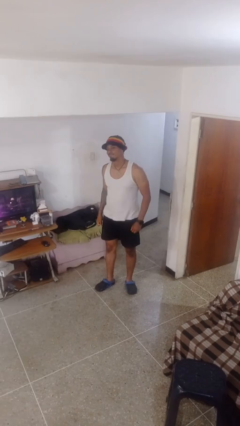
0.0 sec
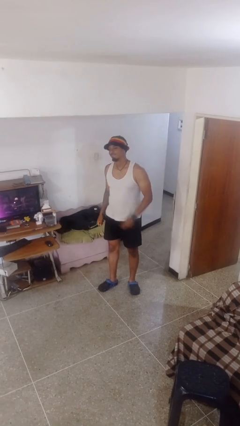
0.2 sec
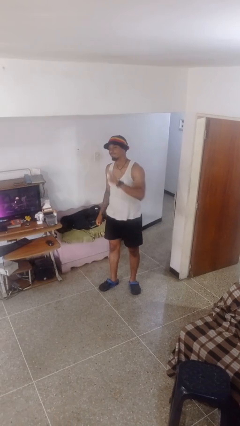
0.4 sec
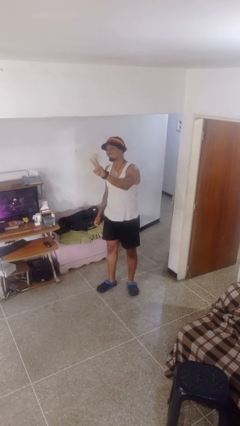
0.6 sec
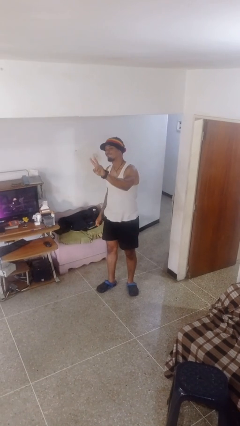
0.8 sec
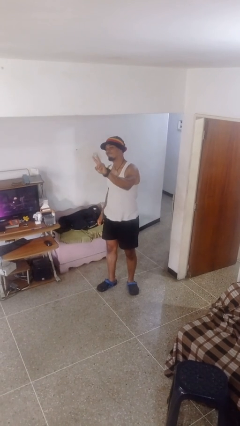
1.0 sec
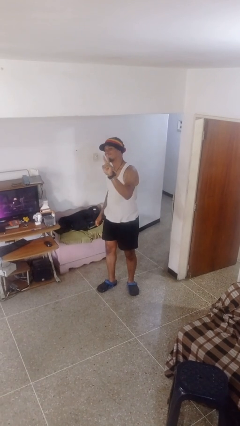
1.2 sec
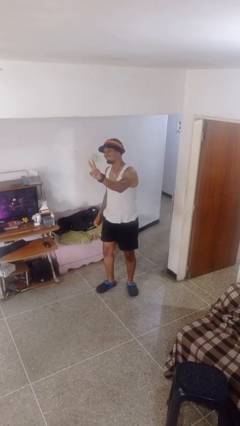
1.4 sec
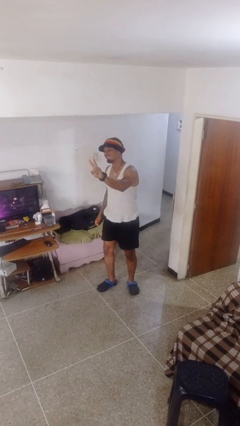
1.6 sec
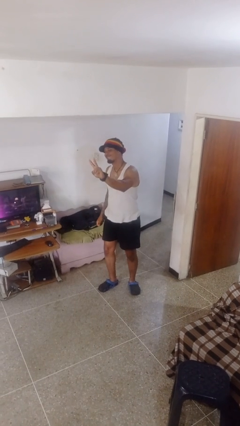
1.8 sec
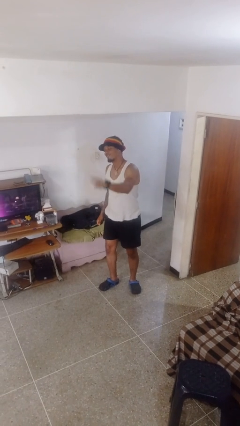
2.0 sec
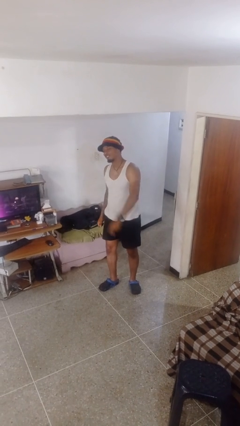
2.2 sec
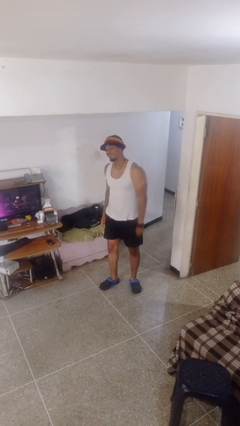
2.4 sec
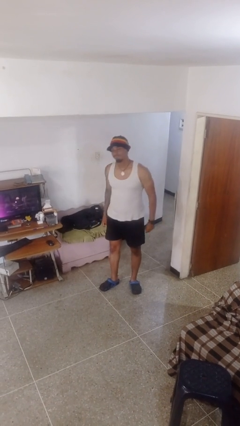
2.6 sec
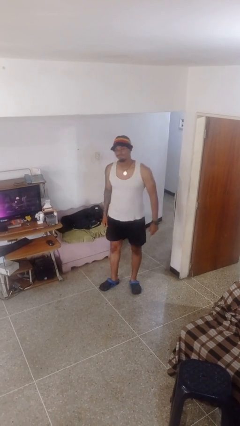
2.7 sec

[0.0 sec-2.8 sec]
person gestures peace

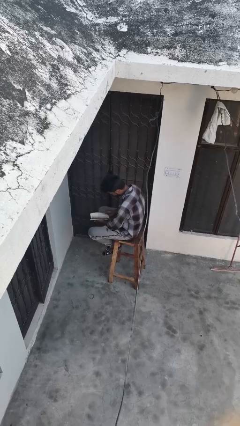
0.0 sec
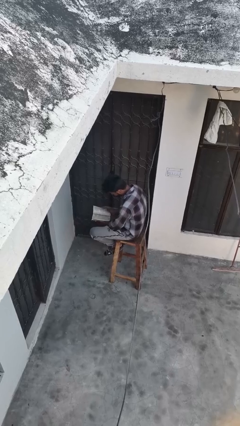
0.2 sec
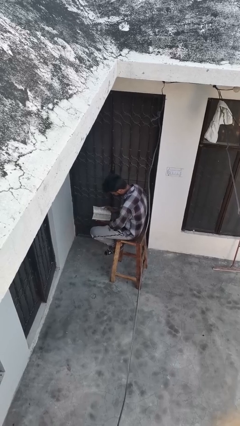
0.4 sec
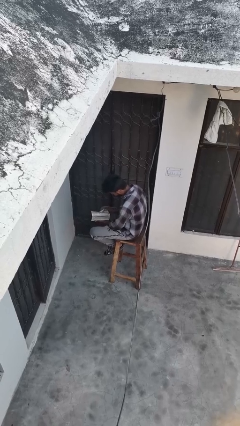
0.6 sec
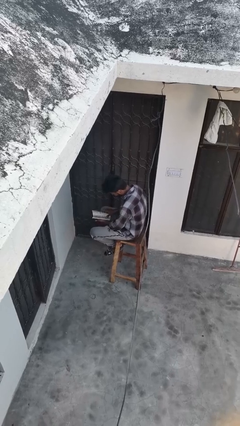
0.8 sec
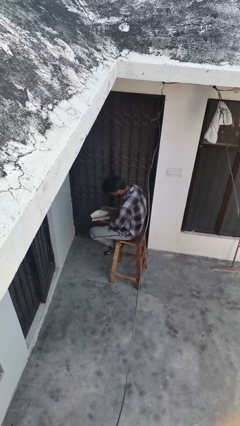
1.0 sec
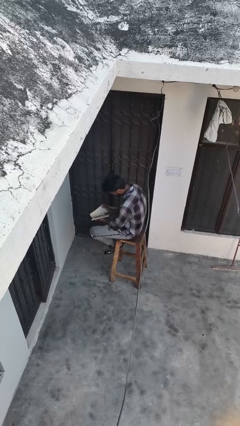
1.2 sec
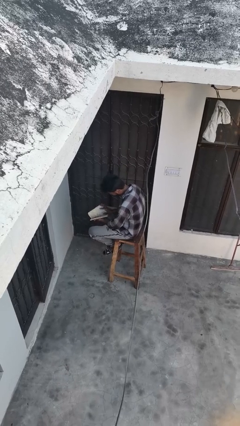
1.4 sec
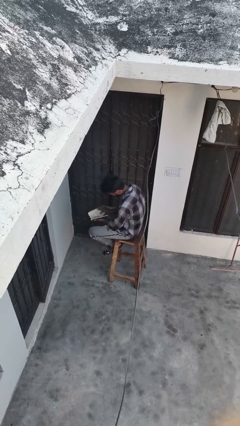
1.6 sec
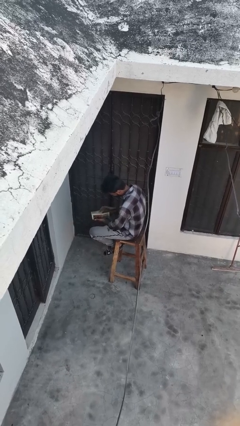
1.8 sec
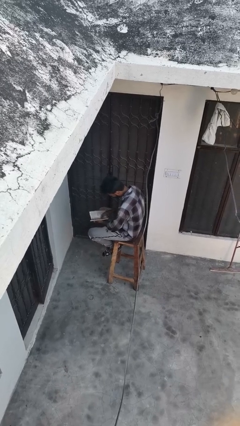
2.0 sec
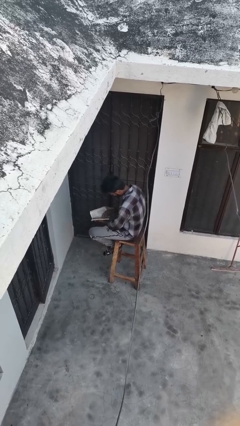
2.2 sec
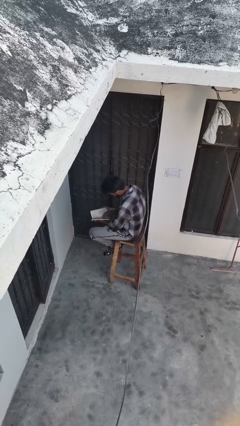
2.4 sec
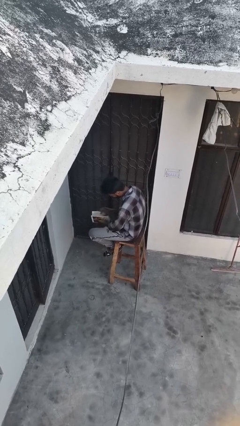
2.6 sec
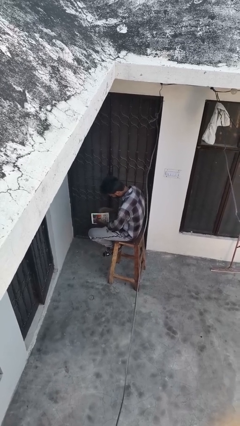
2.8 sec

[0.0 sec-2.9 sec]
person reads book

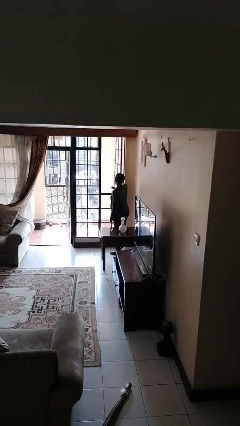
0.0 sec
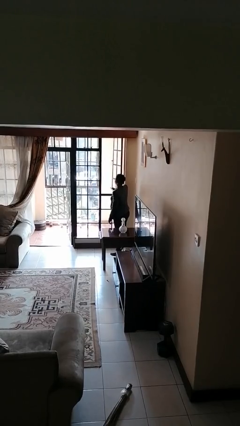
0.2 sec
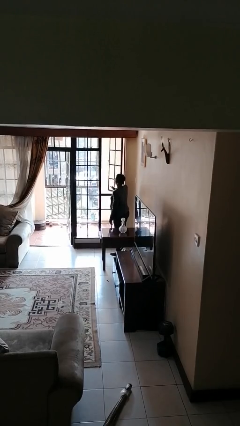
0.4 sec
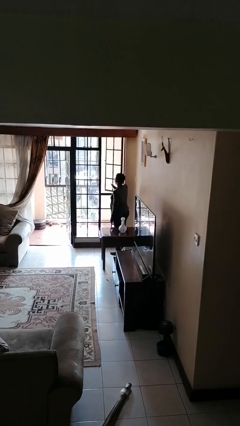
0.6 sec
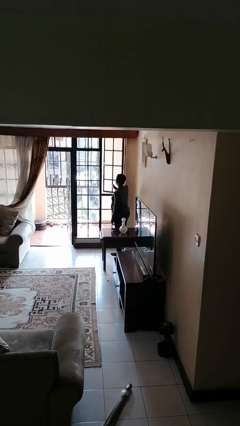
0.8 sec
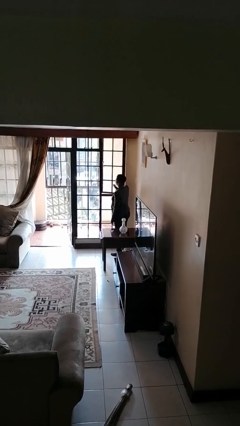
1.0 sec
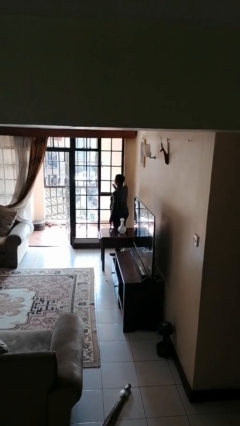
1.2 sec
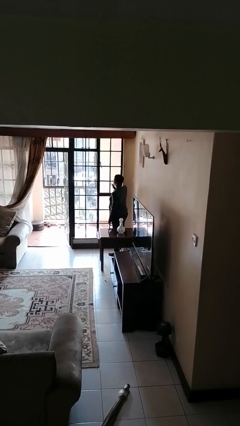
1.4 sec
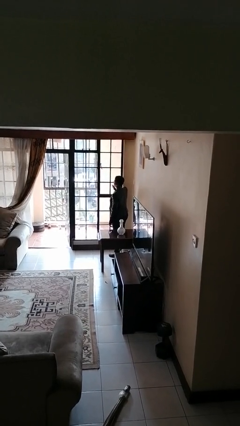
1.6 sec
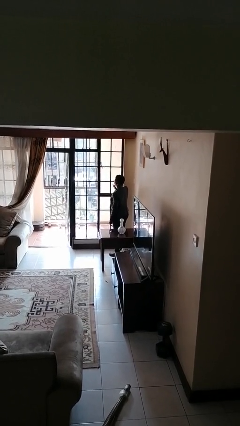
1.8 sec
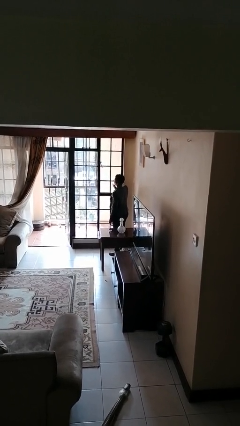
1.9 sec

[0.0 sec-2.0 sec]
person closes home window

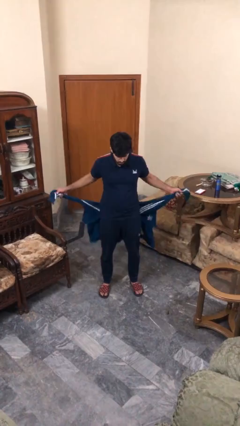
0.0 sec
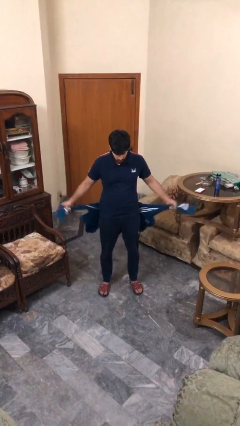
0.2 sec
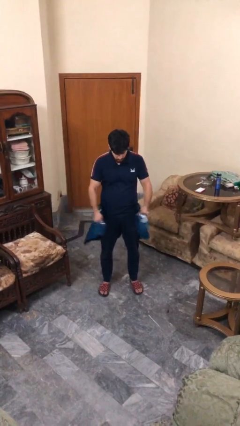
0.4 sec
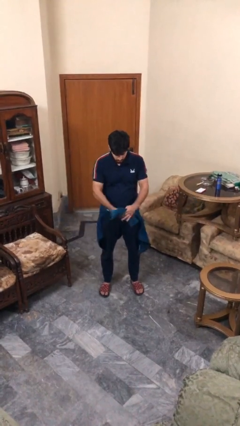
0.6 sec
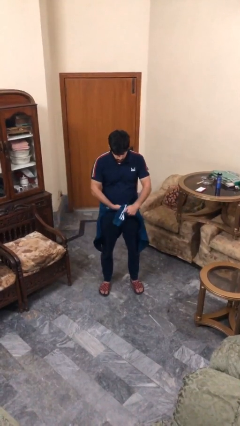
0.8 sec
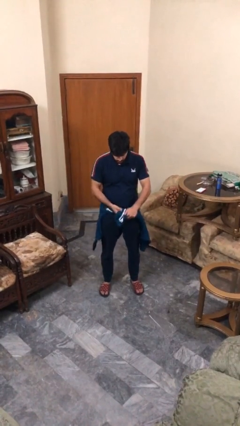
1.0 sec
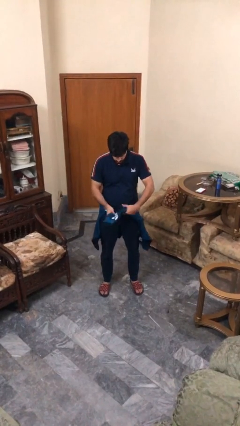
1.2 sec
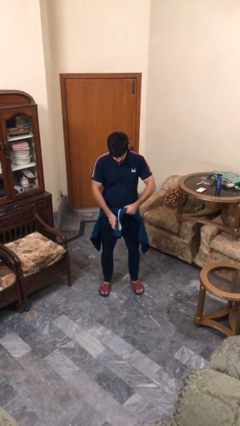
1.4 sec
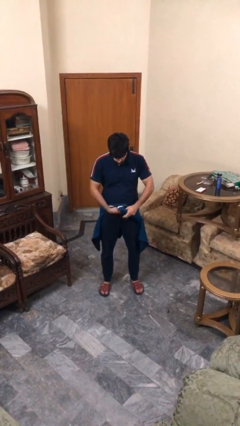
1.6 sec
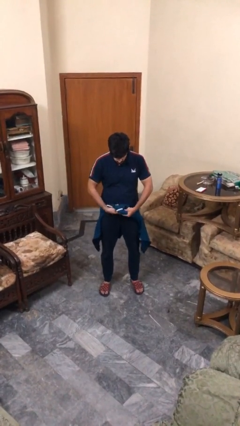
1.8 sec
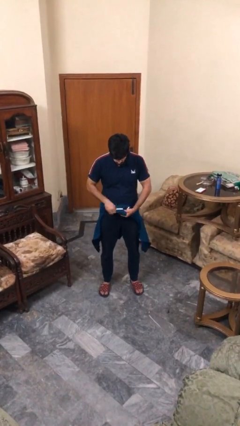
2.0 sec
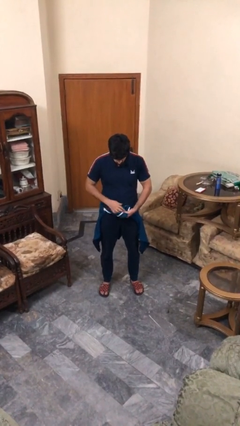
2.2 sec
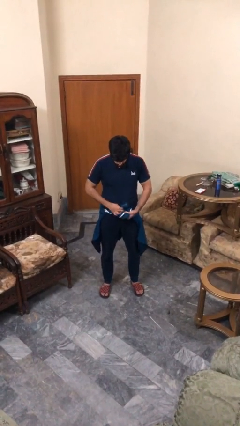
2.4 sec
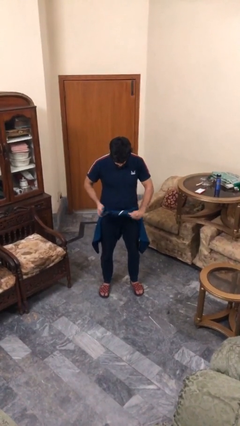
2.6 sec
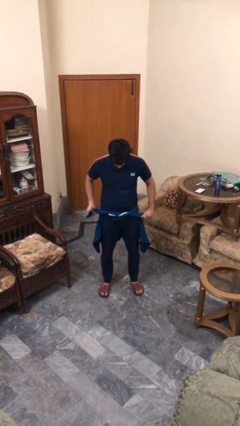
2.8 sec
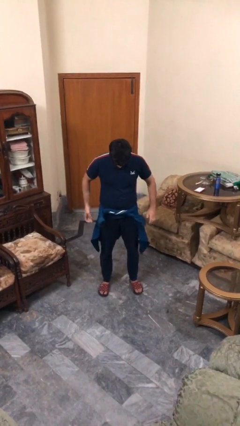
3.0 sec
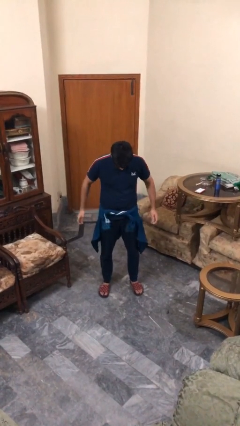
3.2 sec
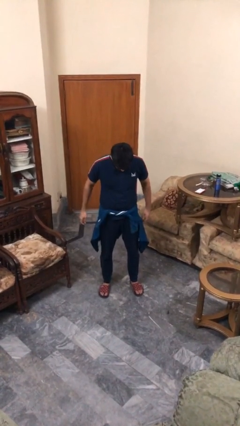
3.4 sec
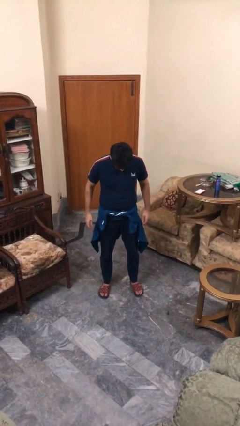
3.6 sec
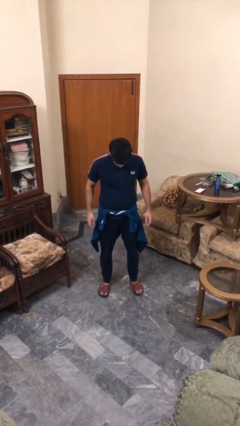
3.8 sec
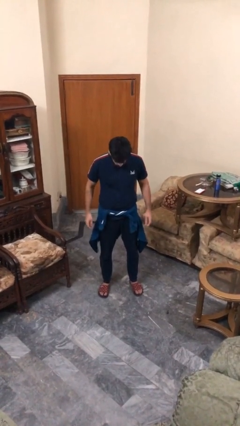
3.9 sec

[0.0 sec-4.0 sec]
person ties jacket around waist

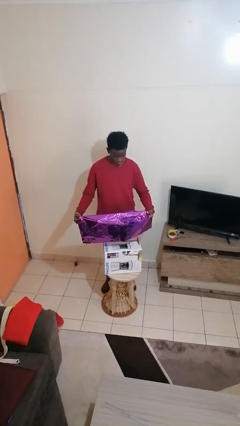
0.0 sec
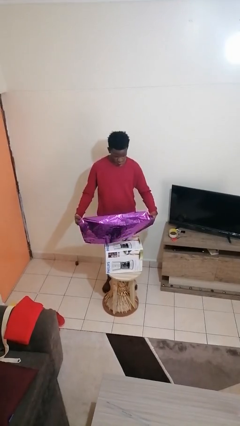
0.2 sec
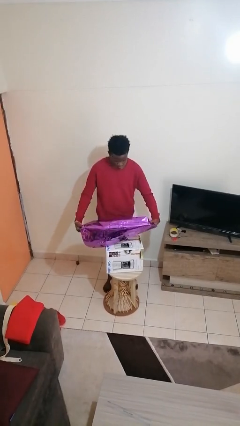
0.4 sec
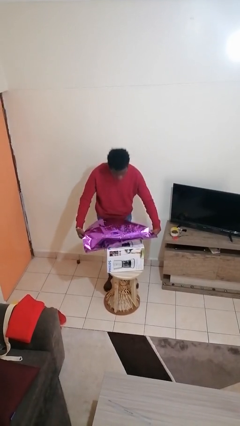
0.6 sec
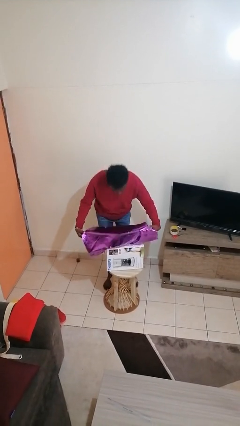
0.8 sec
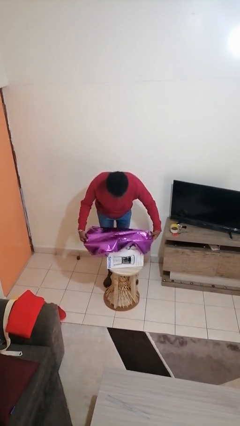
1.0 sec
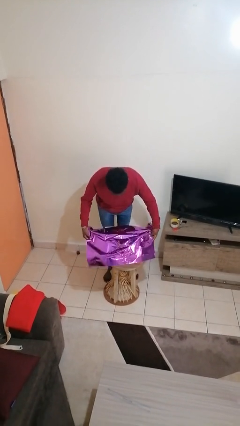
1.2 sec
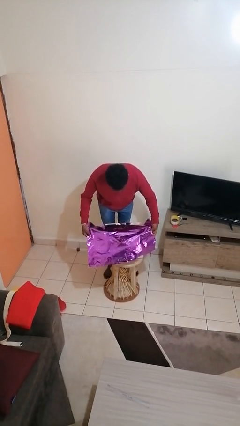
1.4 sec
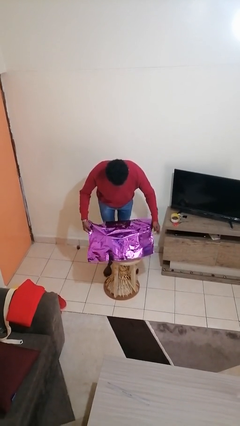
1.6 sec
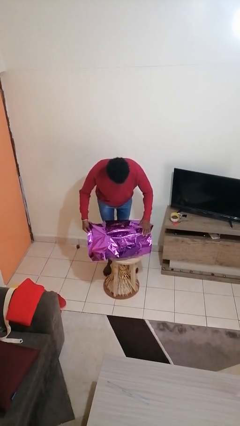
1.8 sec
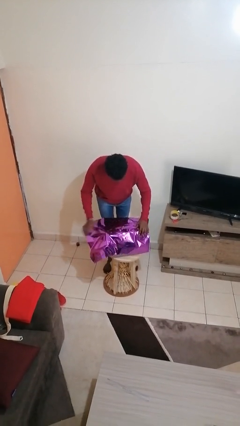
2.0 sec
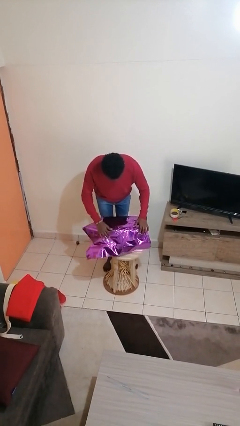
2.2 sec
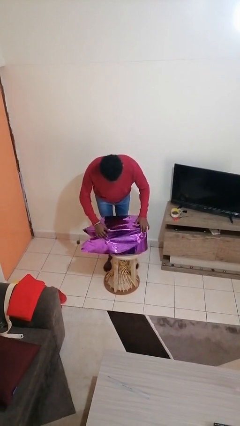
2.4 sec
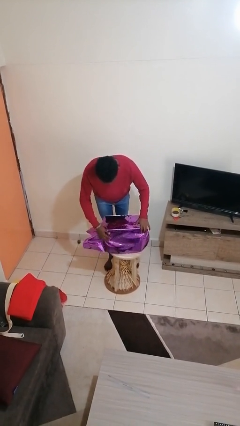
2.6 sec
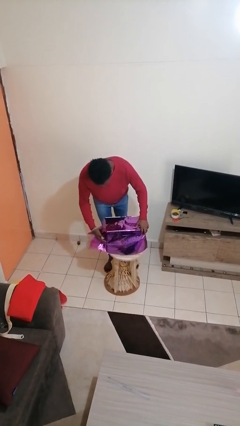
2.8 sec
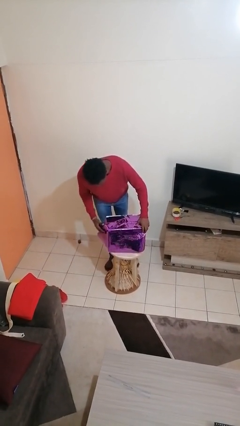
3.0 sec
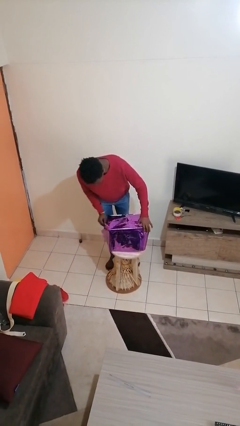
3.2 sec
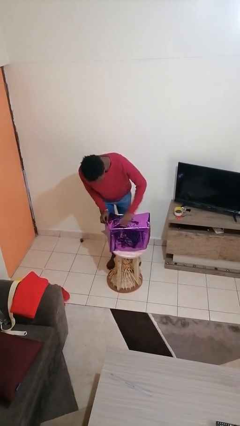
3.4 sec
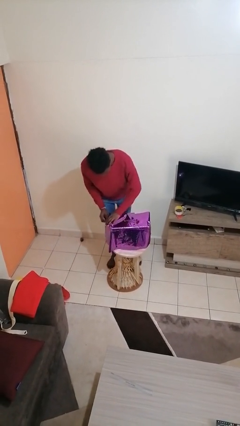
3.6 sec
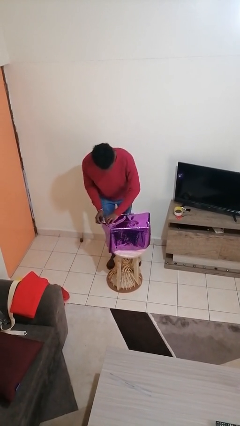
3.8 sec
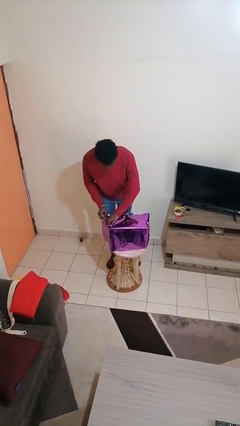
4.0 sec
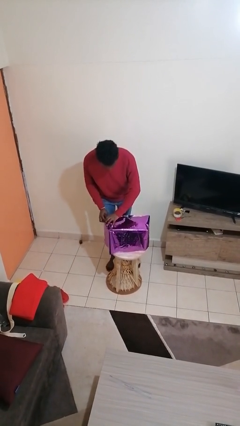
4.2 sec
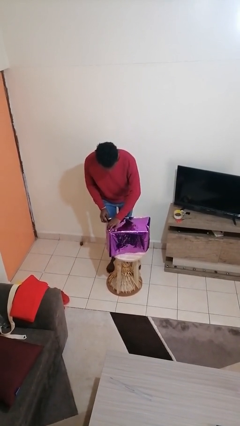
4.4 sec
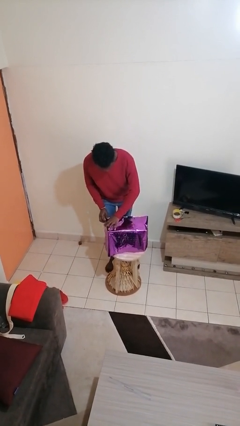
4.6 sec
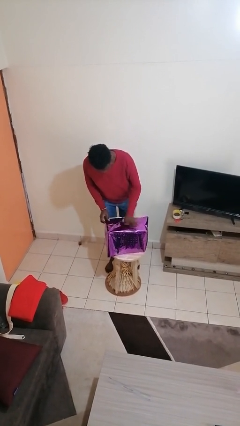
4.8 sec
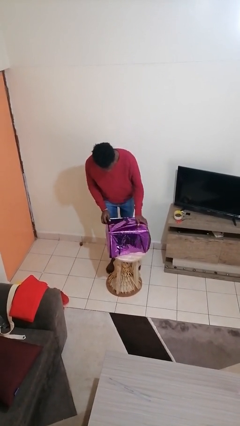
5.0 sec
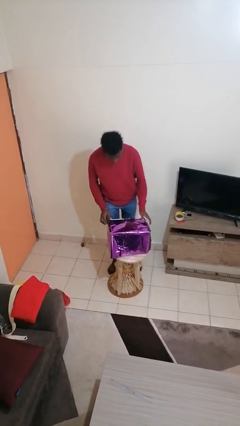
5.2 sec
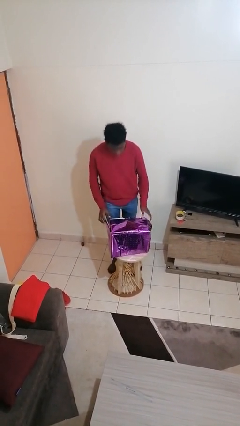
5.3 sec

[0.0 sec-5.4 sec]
person wraps box

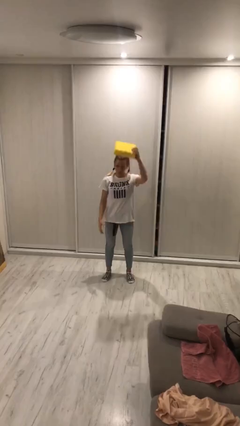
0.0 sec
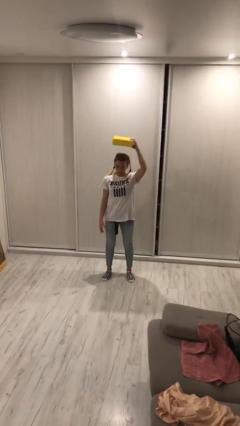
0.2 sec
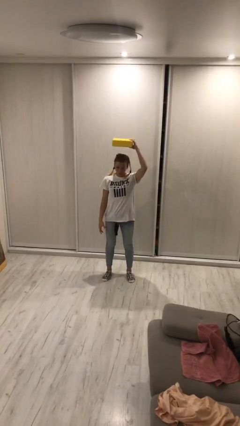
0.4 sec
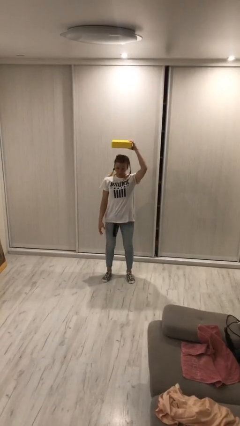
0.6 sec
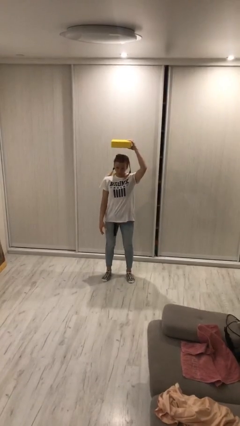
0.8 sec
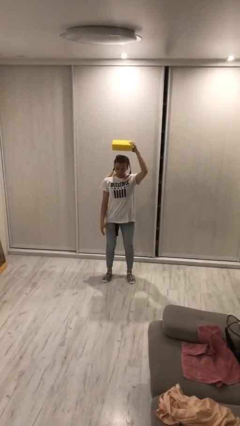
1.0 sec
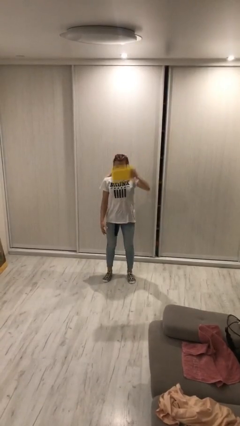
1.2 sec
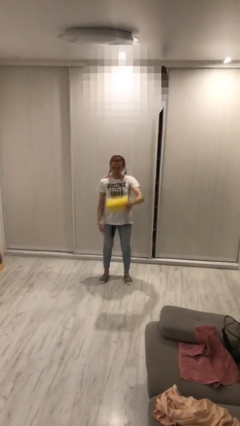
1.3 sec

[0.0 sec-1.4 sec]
person holds object above head
